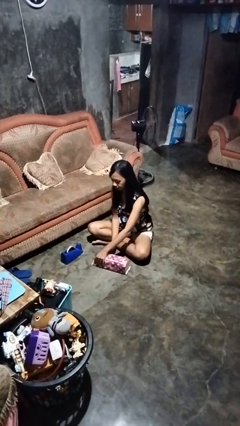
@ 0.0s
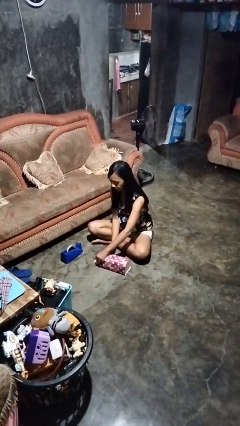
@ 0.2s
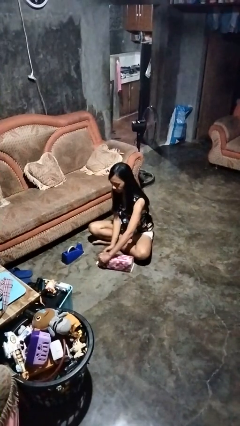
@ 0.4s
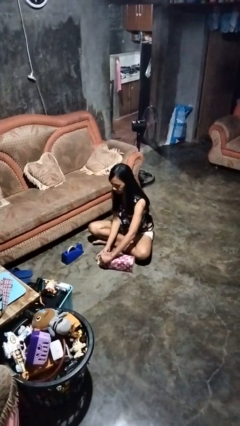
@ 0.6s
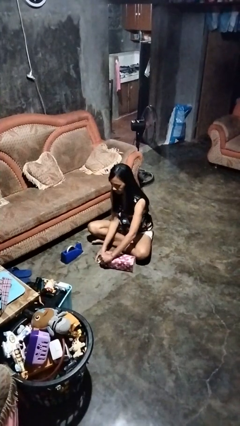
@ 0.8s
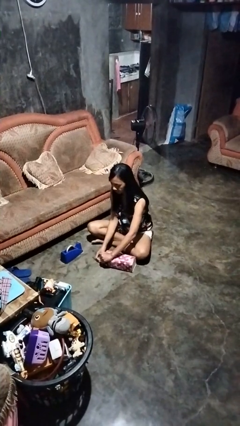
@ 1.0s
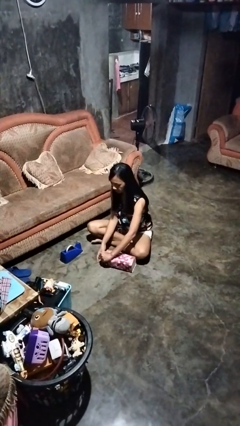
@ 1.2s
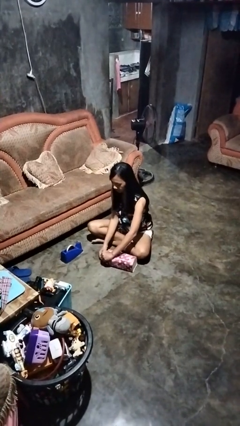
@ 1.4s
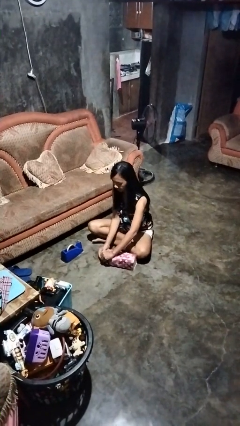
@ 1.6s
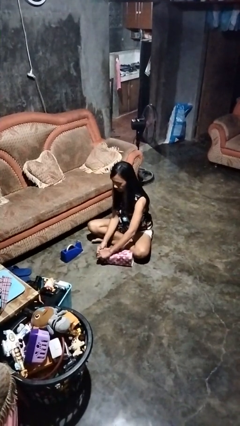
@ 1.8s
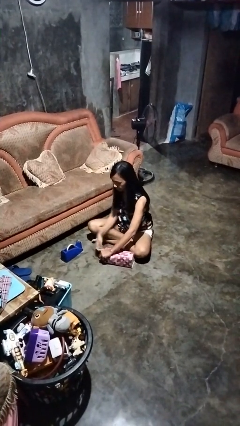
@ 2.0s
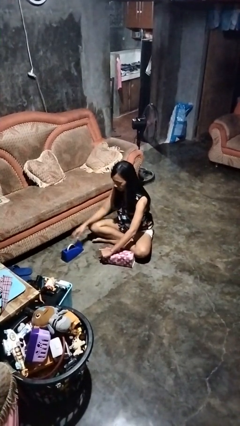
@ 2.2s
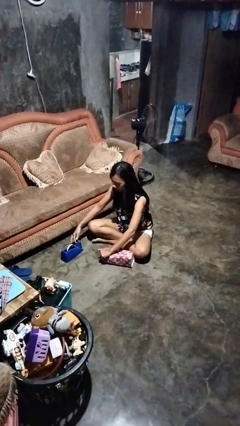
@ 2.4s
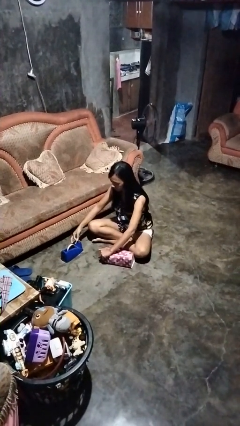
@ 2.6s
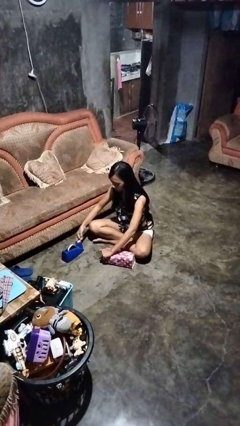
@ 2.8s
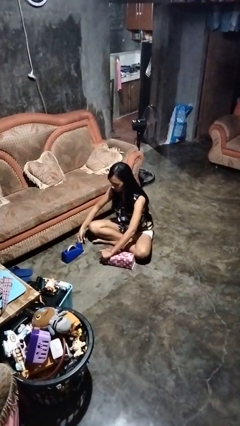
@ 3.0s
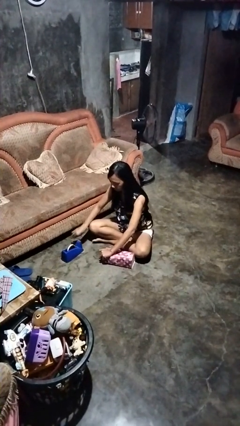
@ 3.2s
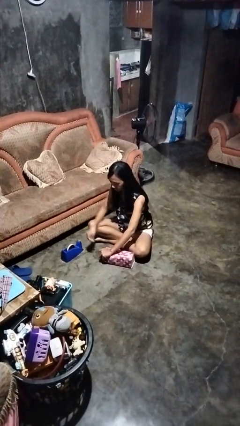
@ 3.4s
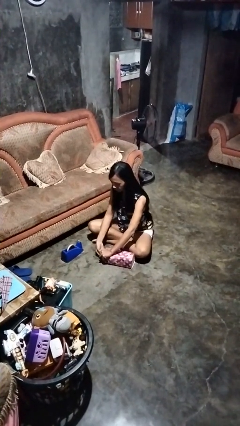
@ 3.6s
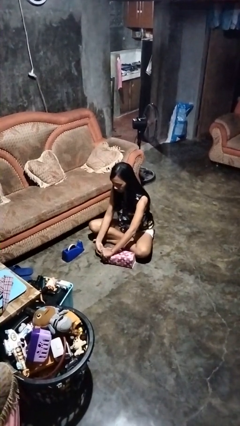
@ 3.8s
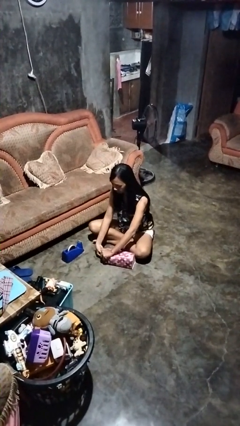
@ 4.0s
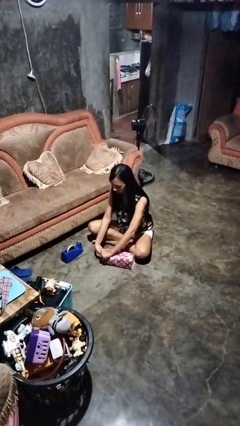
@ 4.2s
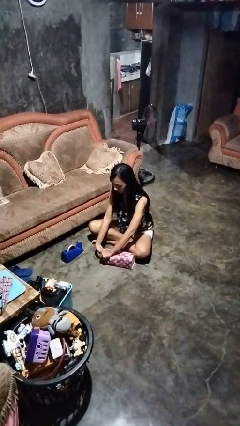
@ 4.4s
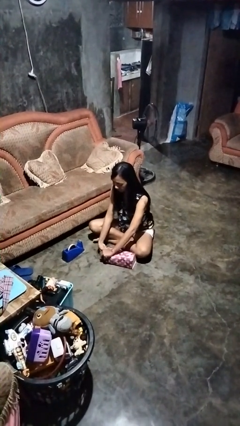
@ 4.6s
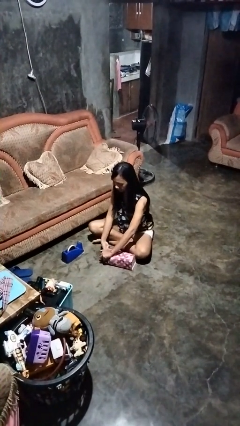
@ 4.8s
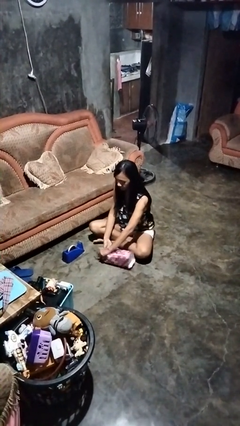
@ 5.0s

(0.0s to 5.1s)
person wraps box

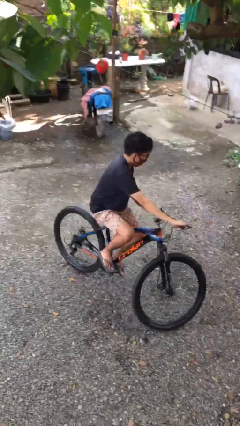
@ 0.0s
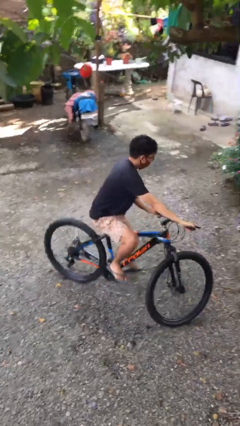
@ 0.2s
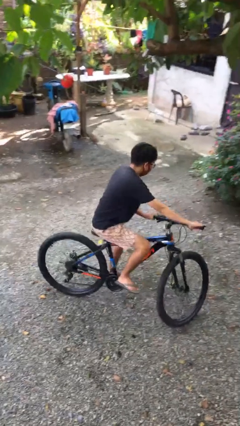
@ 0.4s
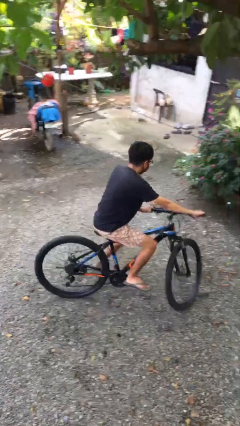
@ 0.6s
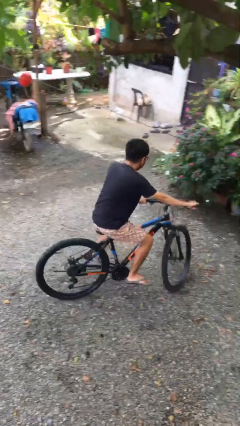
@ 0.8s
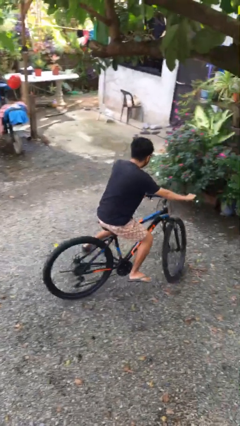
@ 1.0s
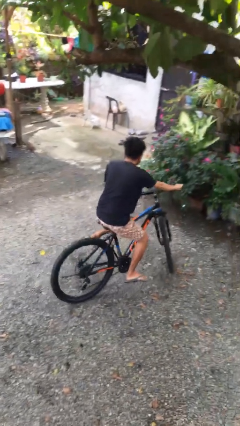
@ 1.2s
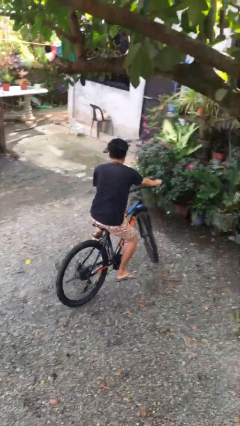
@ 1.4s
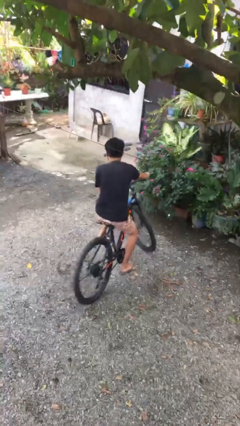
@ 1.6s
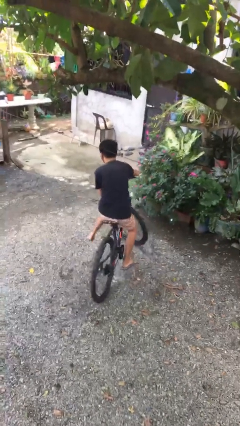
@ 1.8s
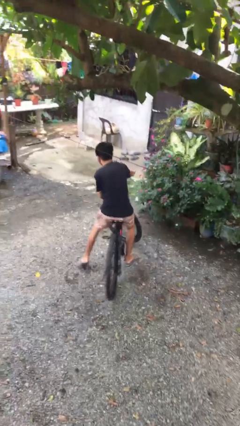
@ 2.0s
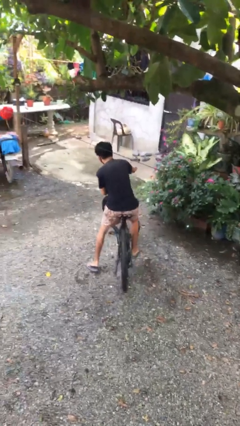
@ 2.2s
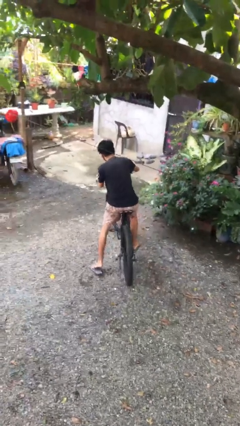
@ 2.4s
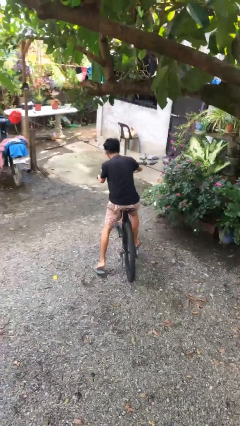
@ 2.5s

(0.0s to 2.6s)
person rides bicycle

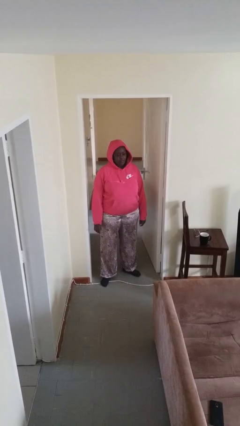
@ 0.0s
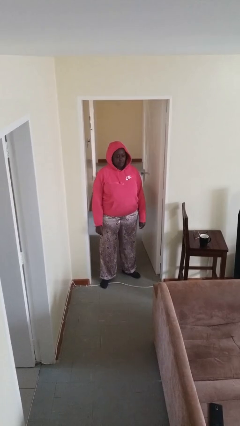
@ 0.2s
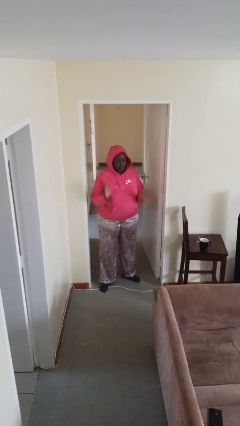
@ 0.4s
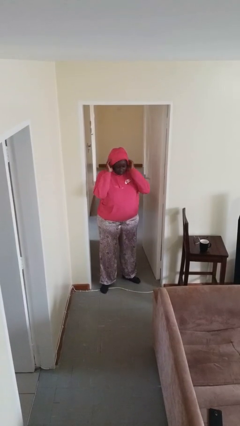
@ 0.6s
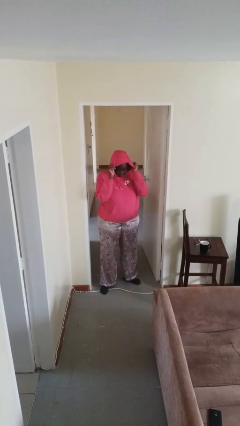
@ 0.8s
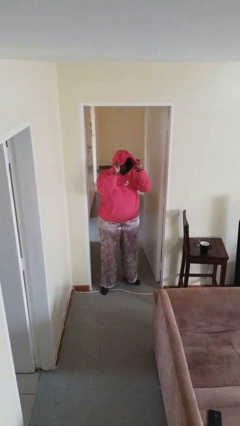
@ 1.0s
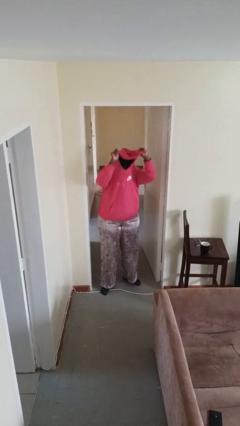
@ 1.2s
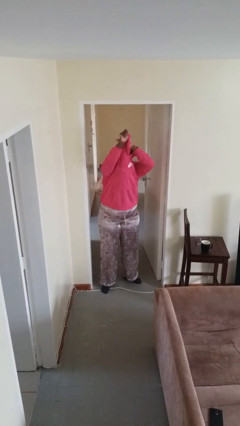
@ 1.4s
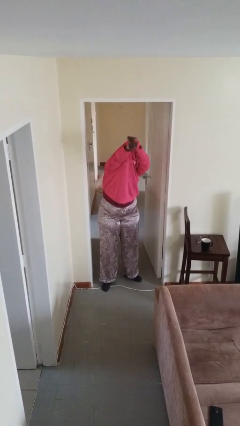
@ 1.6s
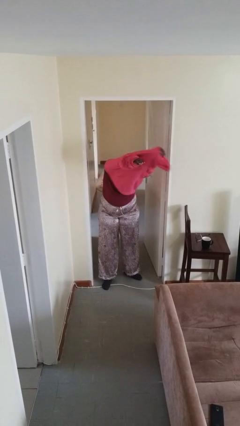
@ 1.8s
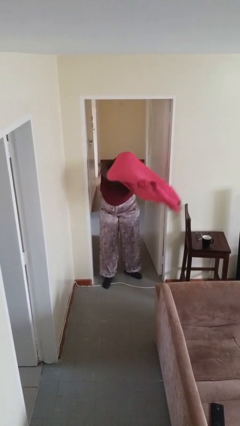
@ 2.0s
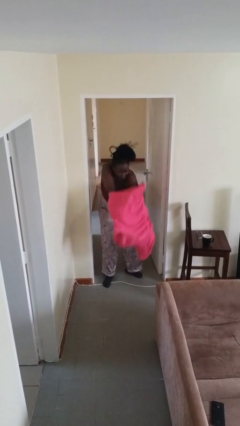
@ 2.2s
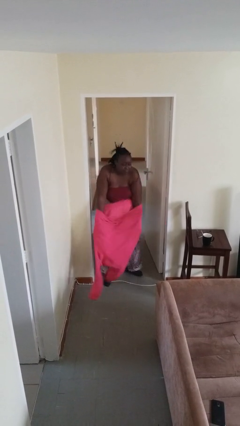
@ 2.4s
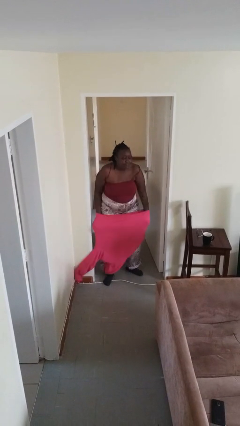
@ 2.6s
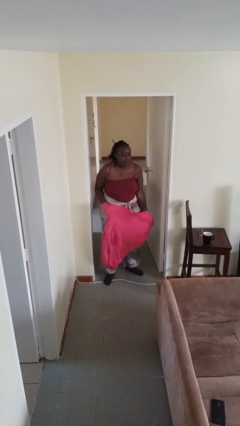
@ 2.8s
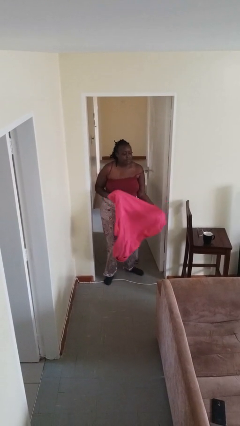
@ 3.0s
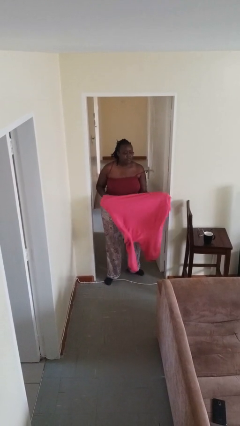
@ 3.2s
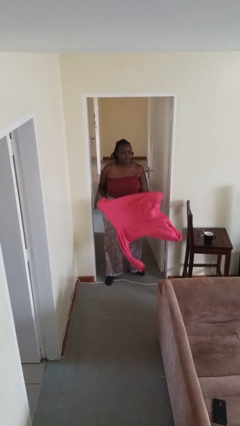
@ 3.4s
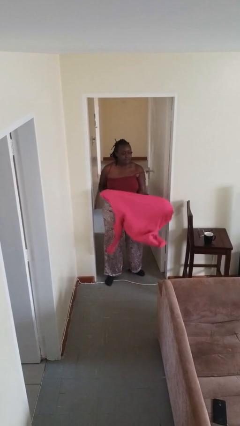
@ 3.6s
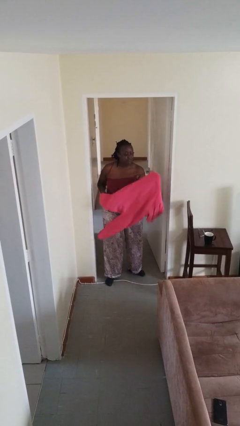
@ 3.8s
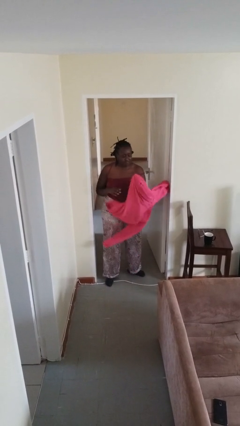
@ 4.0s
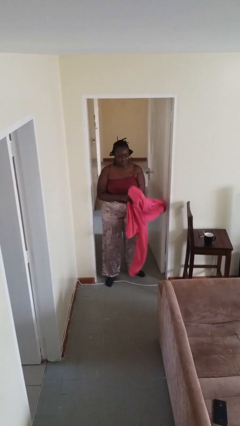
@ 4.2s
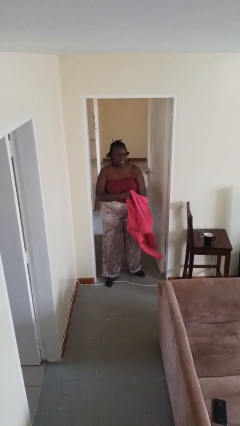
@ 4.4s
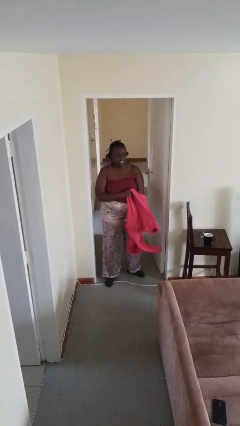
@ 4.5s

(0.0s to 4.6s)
person takes off hoodie

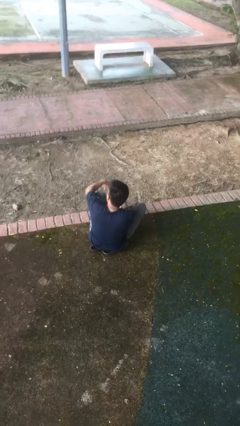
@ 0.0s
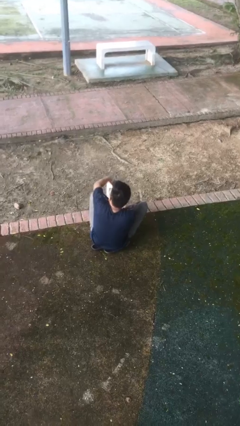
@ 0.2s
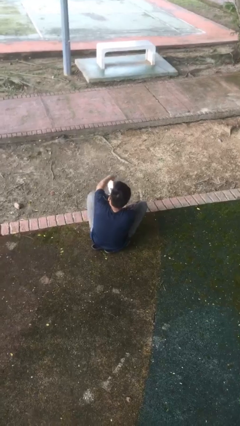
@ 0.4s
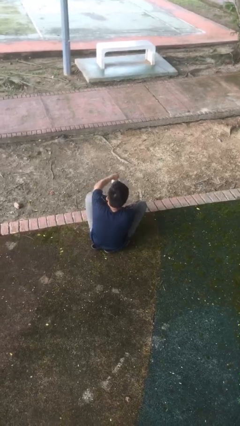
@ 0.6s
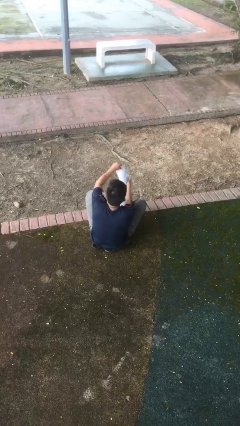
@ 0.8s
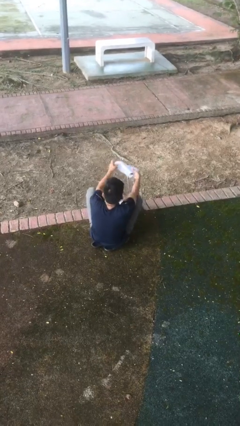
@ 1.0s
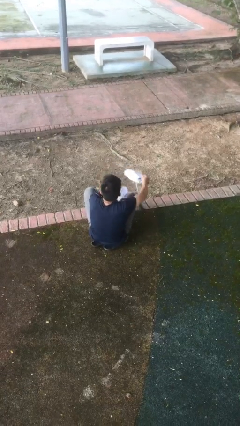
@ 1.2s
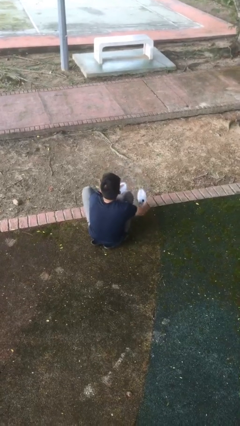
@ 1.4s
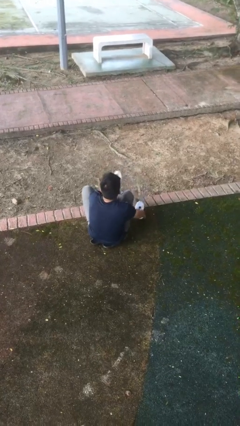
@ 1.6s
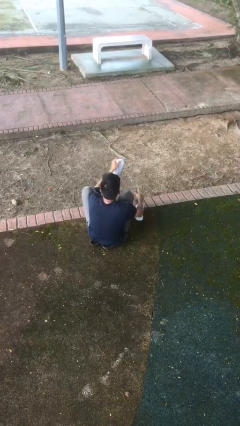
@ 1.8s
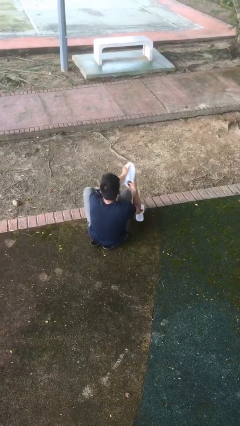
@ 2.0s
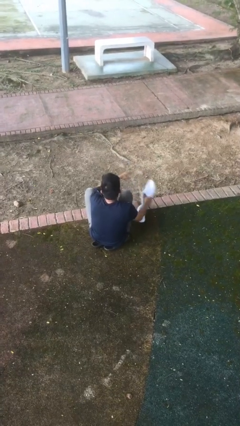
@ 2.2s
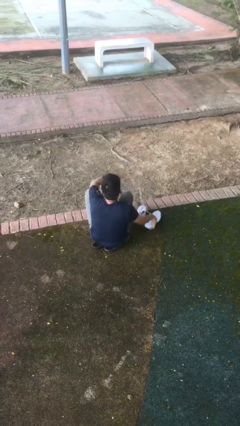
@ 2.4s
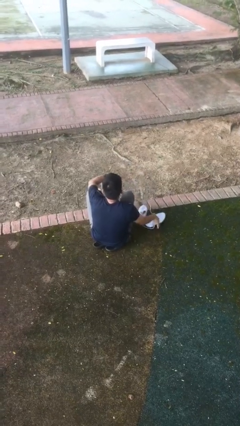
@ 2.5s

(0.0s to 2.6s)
person takes off shoes

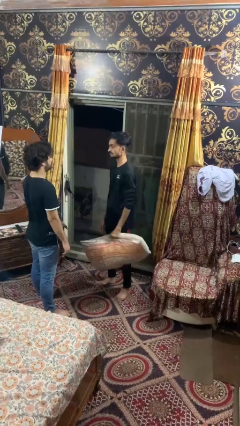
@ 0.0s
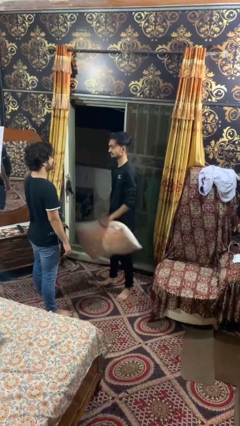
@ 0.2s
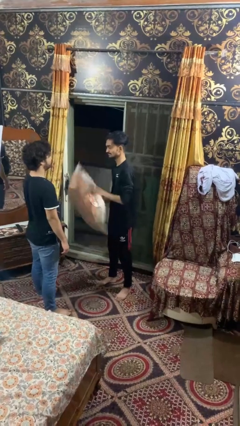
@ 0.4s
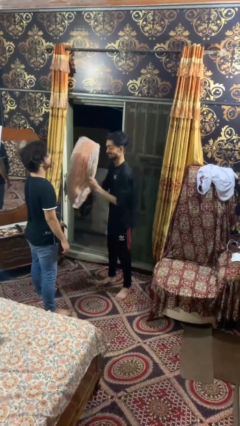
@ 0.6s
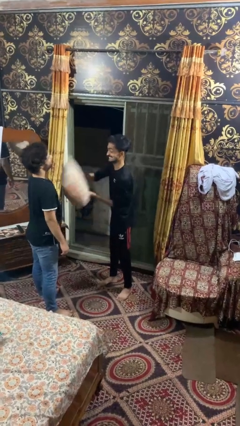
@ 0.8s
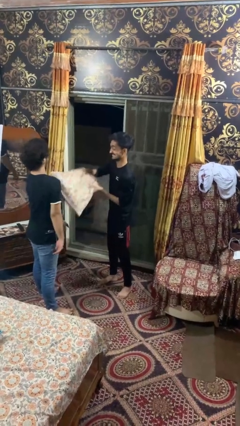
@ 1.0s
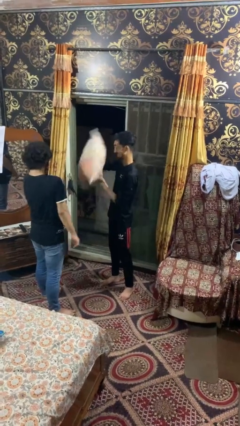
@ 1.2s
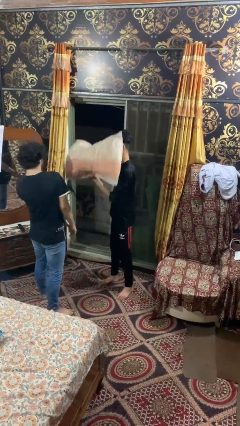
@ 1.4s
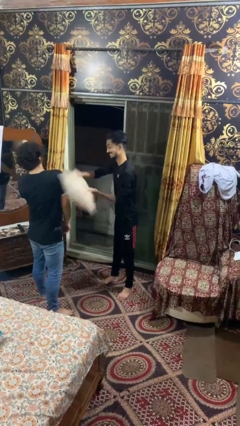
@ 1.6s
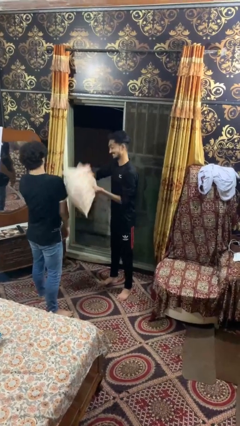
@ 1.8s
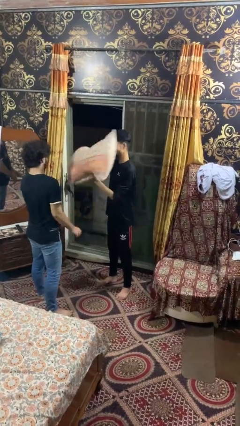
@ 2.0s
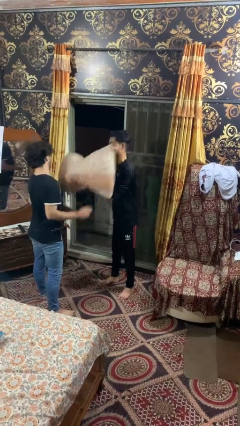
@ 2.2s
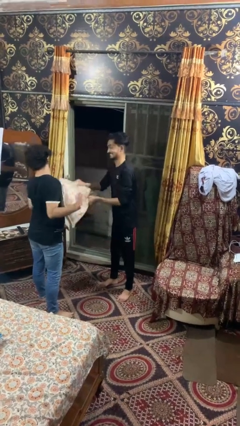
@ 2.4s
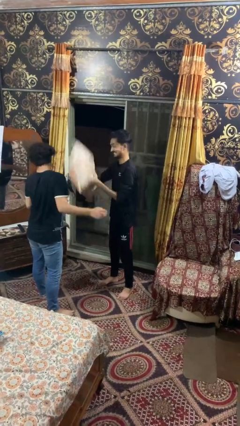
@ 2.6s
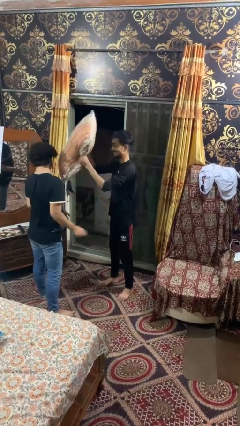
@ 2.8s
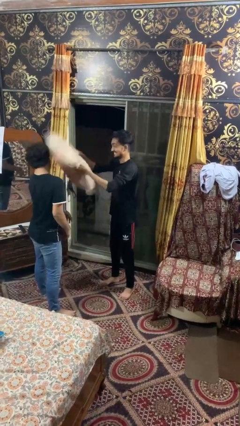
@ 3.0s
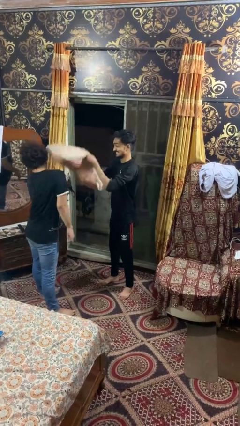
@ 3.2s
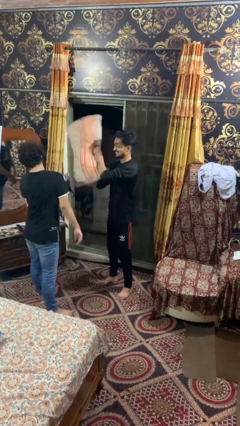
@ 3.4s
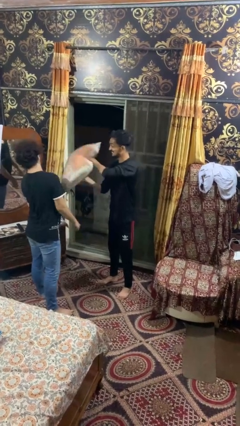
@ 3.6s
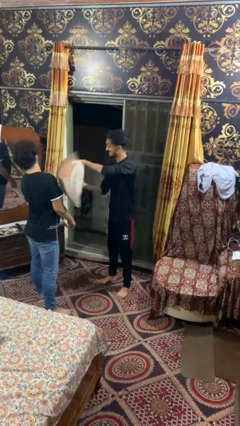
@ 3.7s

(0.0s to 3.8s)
person hits person with pillow
